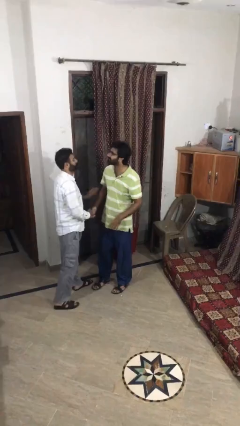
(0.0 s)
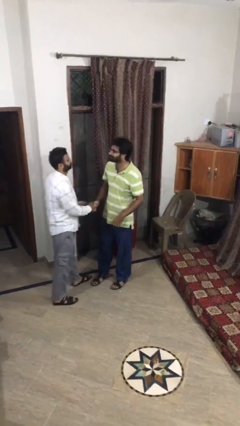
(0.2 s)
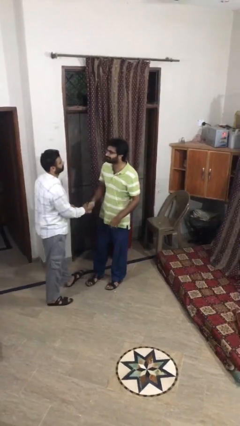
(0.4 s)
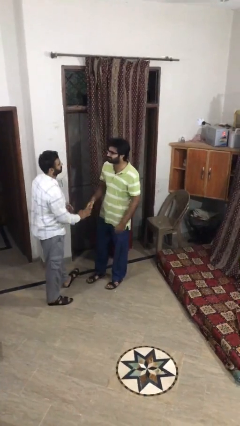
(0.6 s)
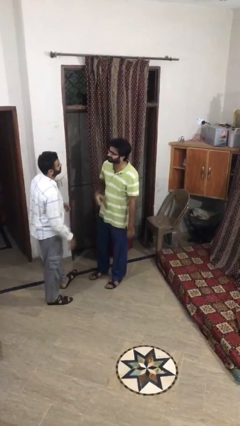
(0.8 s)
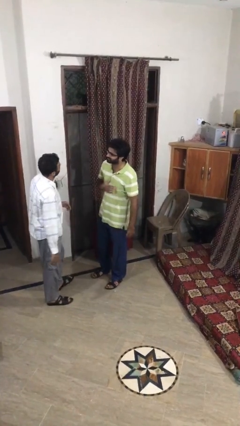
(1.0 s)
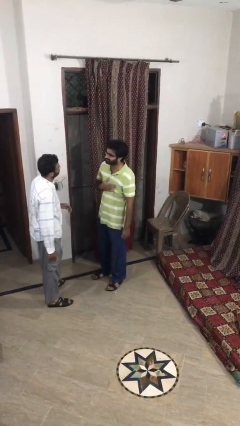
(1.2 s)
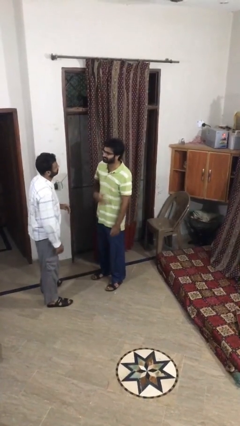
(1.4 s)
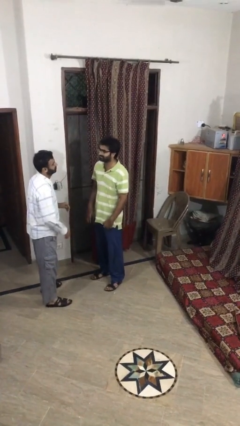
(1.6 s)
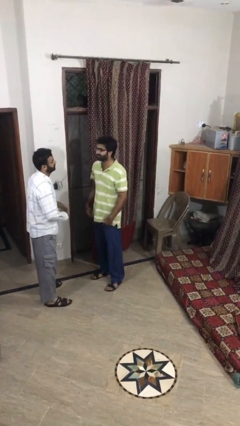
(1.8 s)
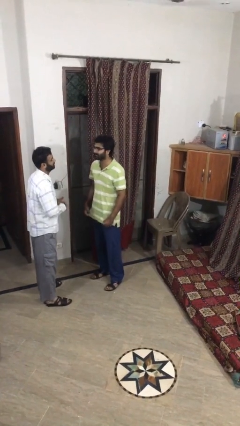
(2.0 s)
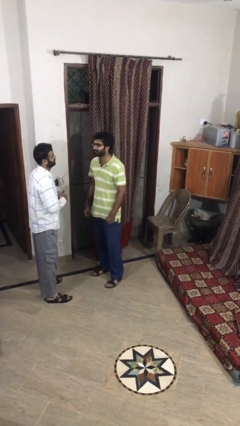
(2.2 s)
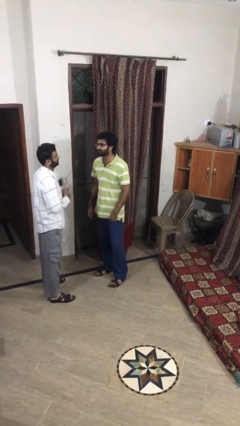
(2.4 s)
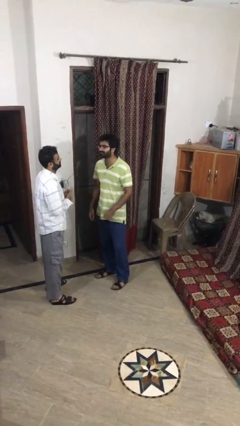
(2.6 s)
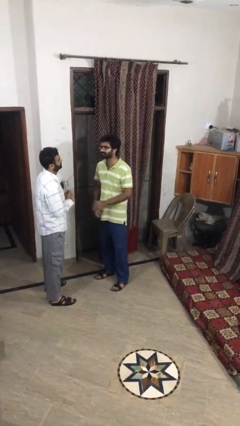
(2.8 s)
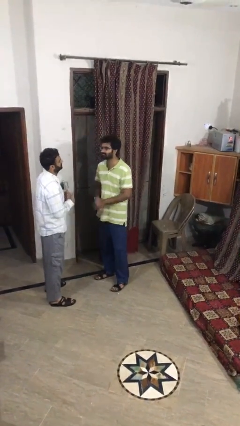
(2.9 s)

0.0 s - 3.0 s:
person talks to person

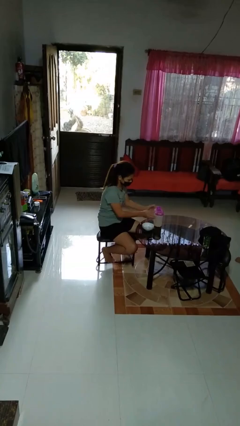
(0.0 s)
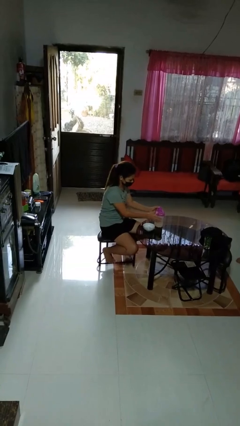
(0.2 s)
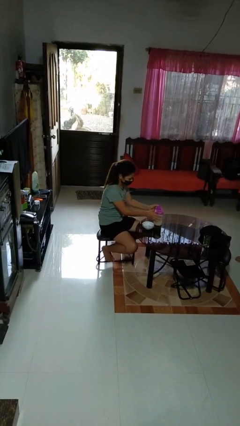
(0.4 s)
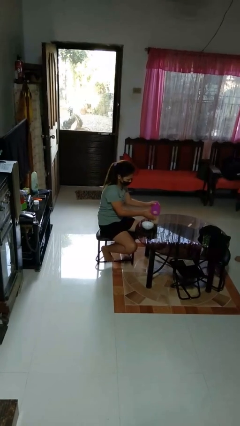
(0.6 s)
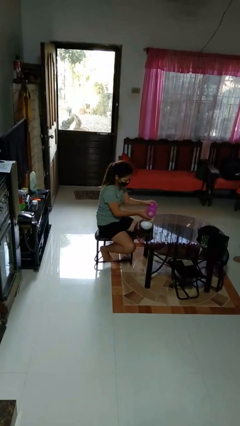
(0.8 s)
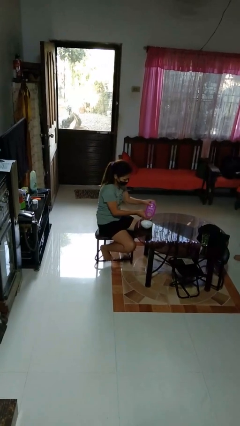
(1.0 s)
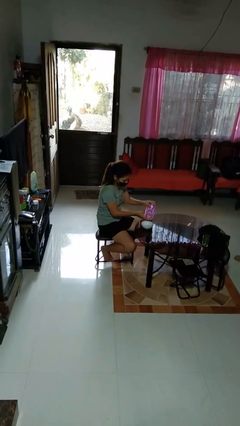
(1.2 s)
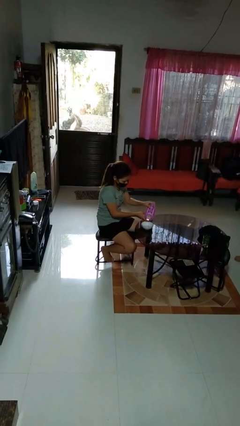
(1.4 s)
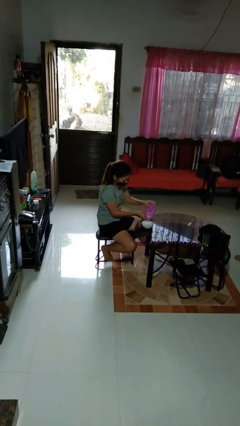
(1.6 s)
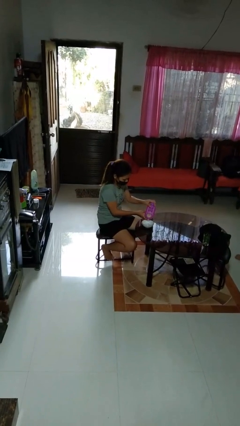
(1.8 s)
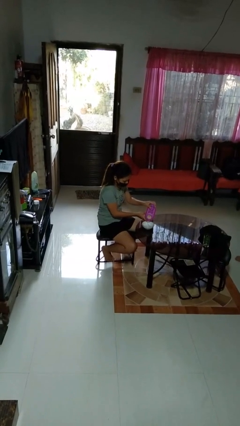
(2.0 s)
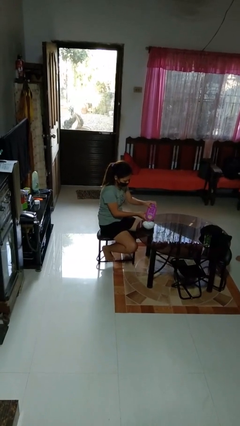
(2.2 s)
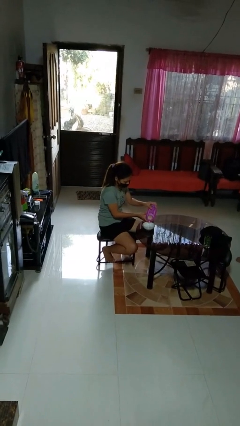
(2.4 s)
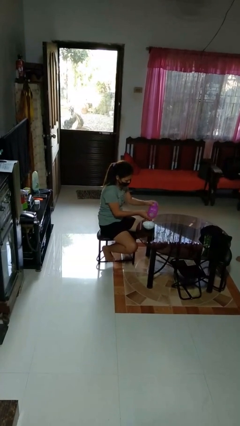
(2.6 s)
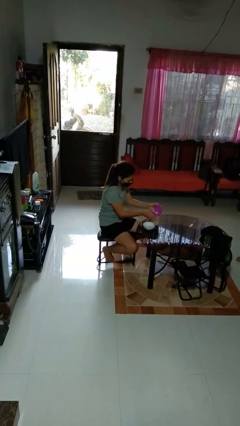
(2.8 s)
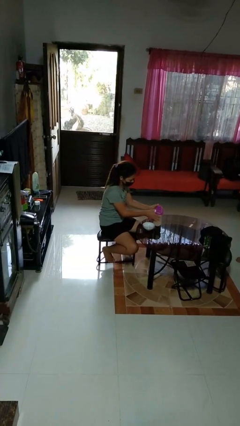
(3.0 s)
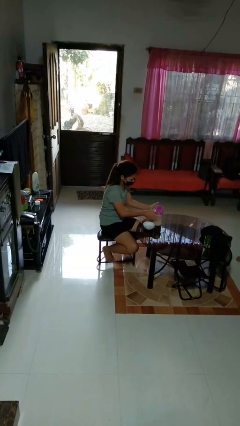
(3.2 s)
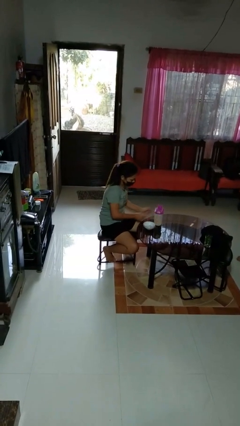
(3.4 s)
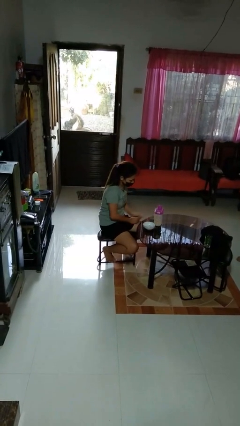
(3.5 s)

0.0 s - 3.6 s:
person pours into bowl

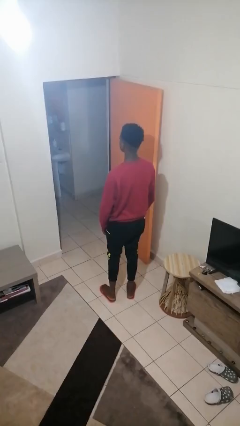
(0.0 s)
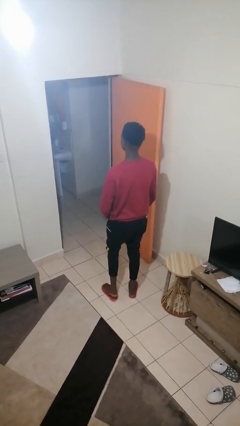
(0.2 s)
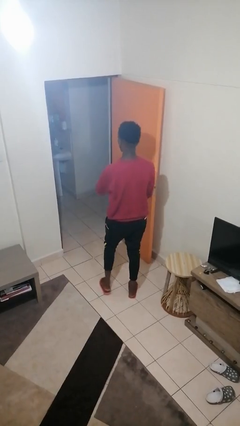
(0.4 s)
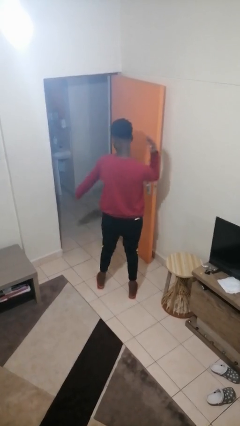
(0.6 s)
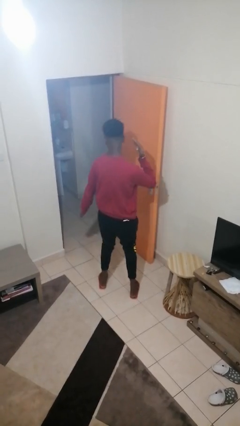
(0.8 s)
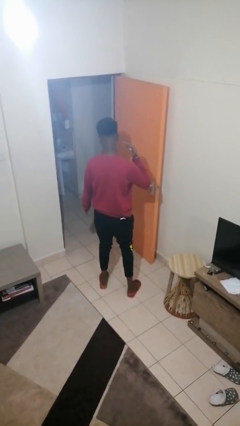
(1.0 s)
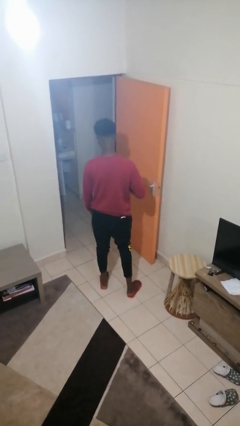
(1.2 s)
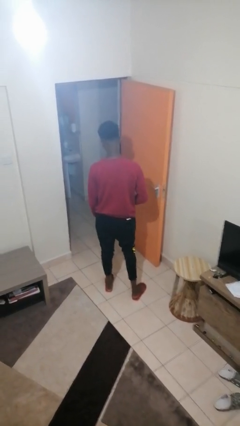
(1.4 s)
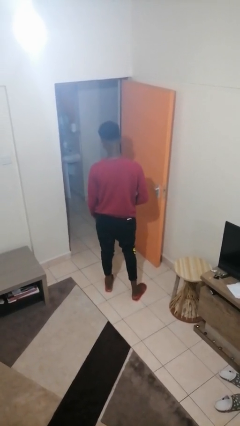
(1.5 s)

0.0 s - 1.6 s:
person karate chop

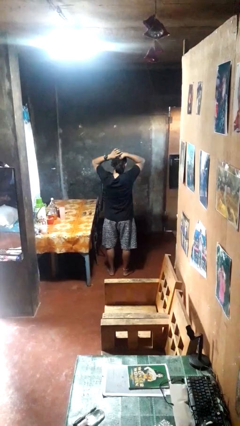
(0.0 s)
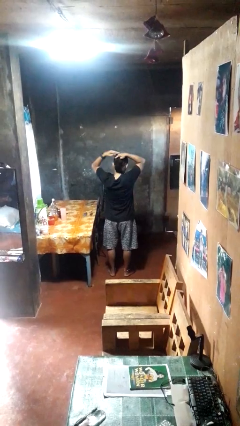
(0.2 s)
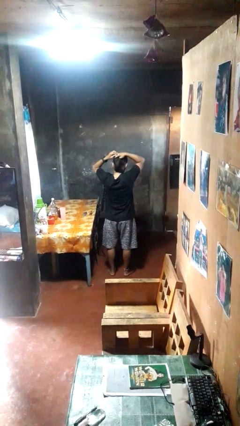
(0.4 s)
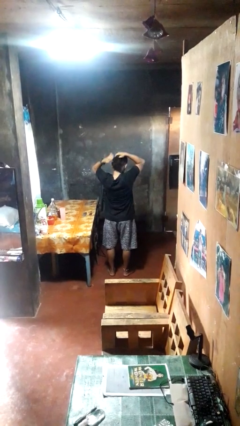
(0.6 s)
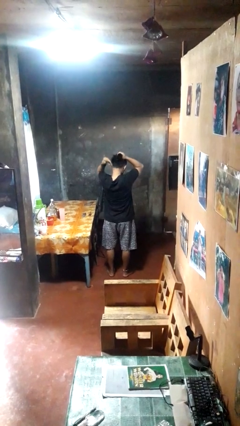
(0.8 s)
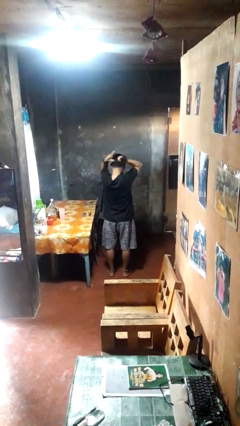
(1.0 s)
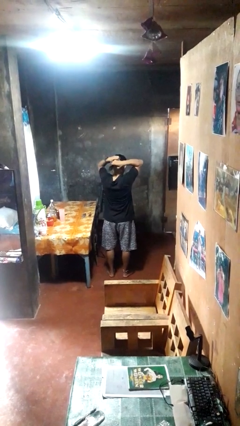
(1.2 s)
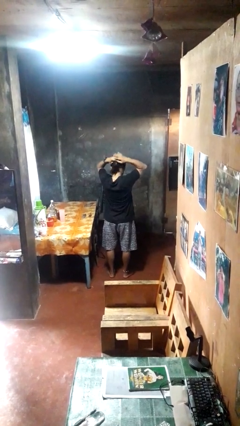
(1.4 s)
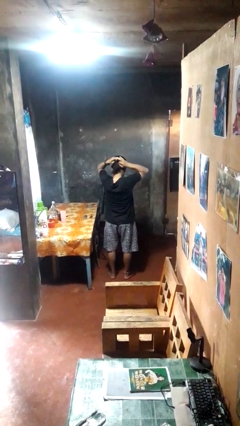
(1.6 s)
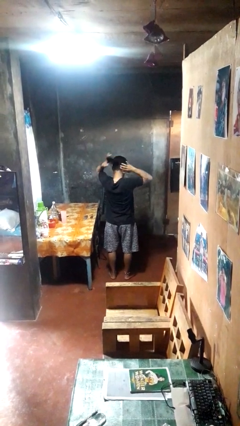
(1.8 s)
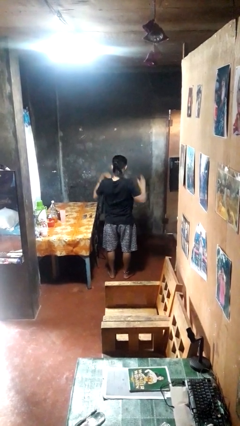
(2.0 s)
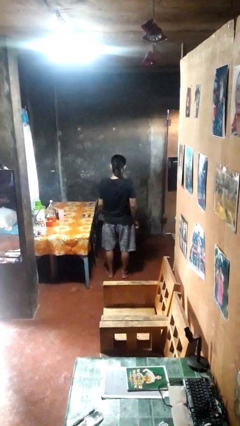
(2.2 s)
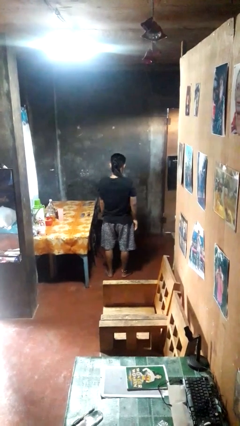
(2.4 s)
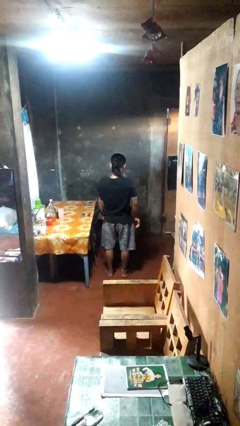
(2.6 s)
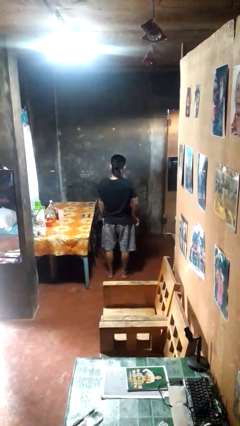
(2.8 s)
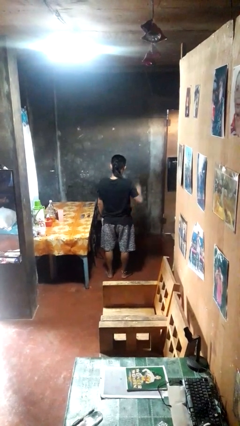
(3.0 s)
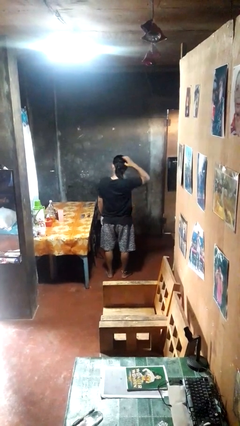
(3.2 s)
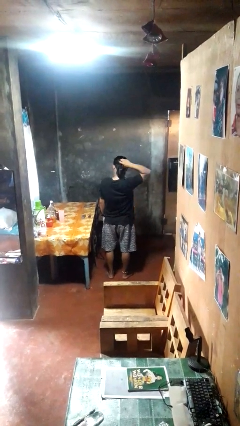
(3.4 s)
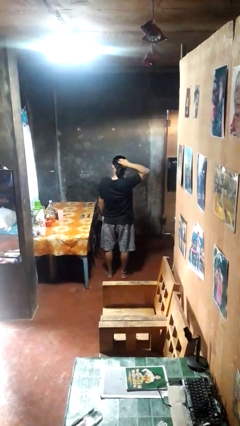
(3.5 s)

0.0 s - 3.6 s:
person puts hair in ponytail

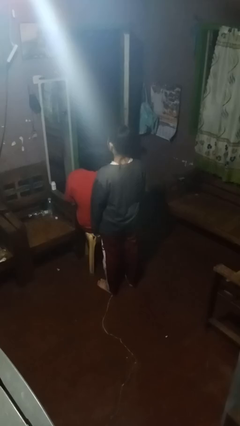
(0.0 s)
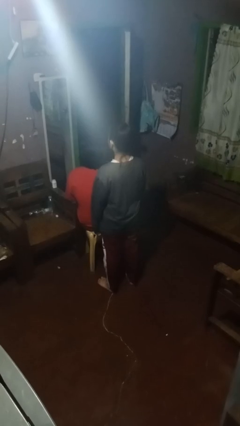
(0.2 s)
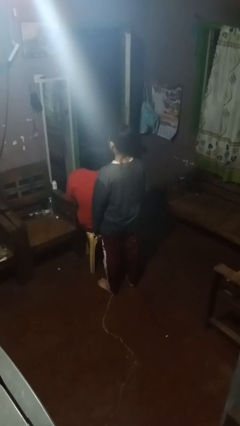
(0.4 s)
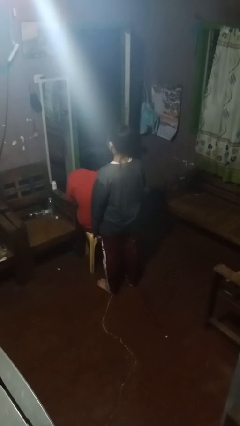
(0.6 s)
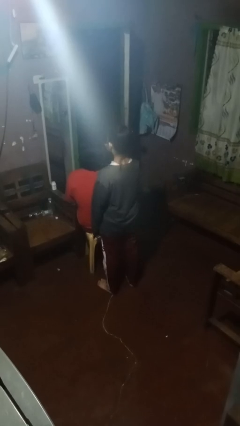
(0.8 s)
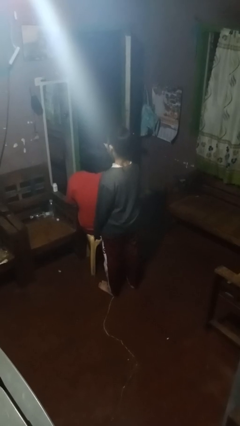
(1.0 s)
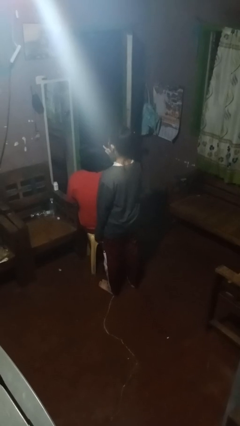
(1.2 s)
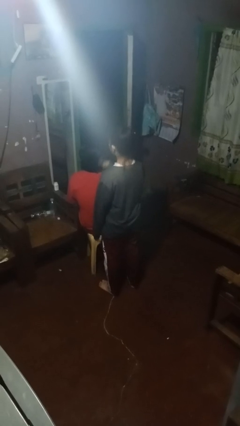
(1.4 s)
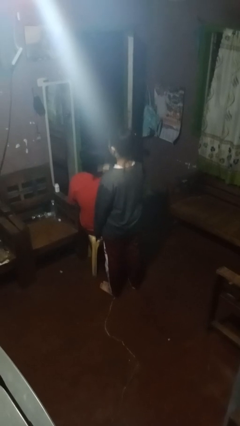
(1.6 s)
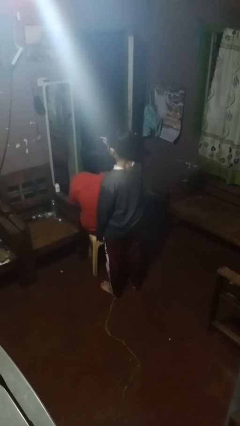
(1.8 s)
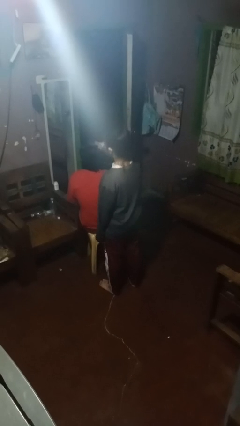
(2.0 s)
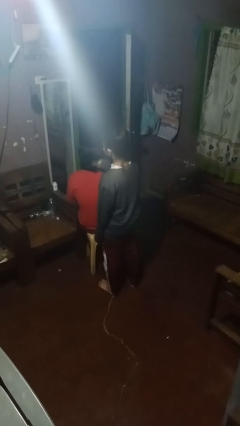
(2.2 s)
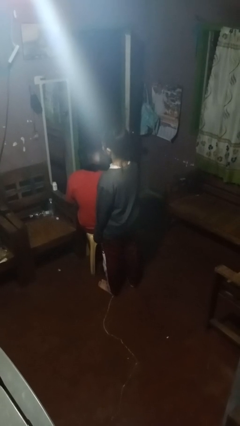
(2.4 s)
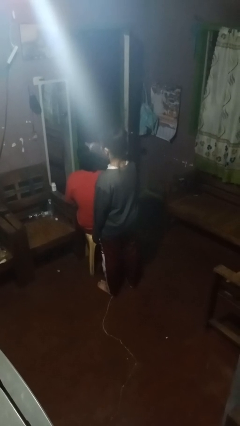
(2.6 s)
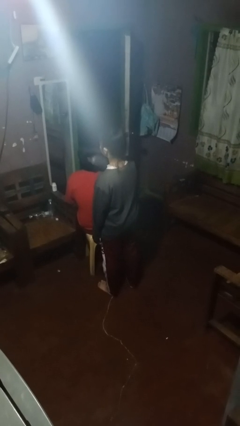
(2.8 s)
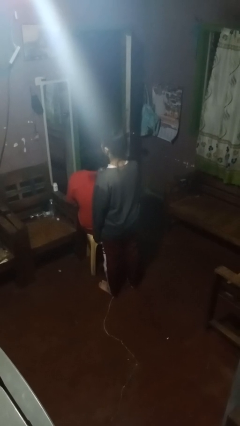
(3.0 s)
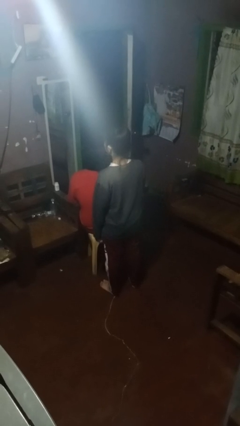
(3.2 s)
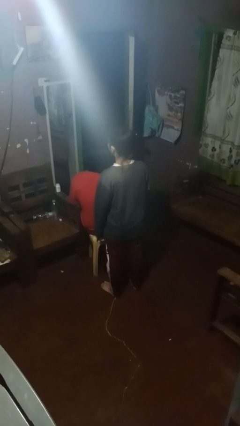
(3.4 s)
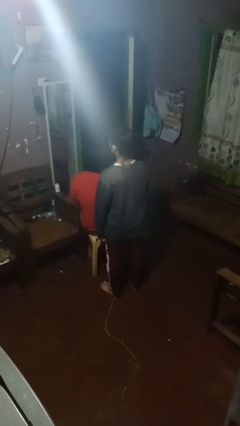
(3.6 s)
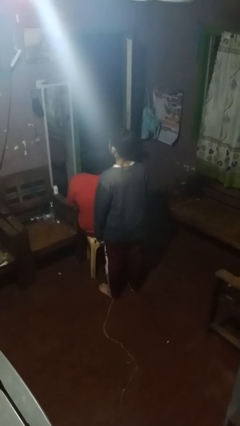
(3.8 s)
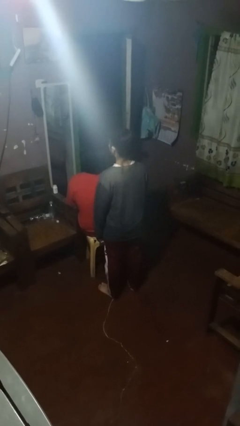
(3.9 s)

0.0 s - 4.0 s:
person brushes hair of person

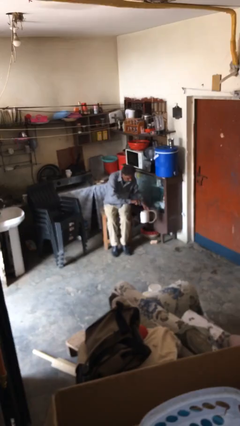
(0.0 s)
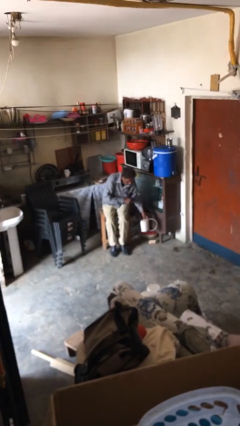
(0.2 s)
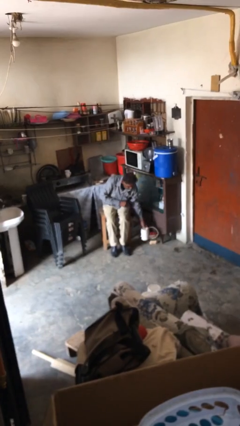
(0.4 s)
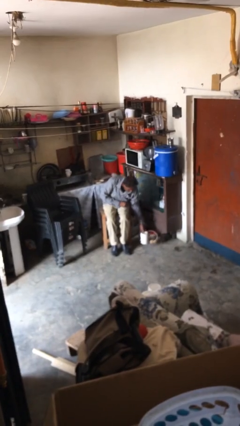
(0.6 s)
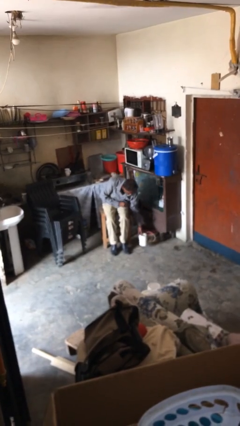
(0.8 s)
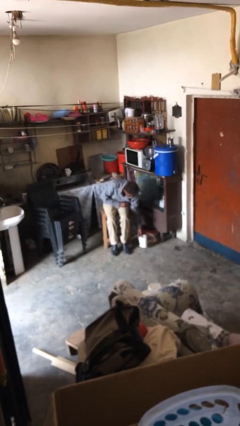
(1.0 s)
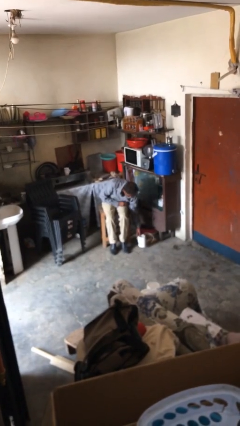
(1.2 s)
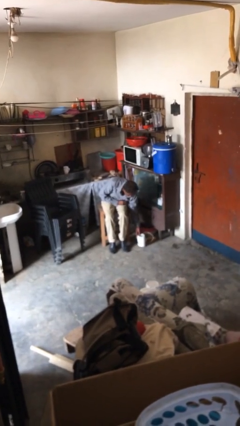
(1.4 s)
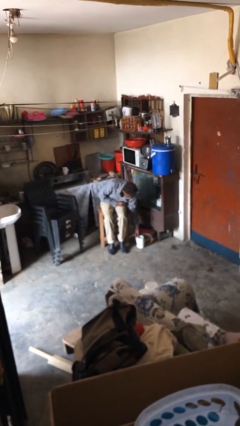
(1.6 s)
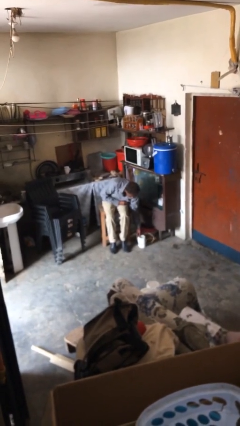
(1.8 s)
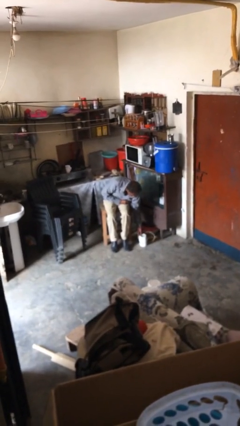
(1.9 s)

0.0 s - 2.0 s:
person puts down object on floor
